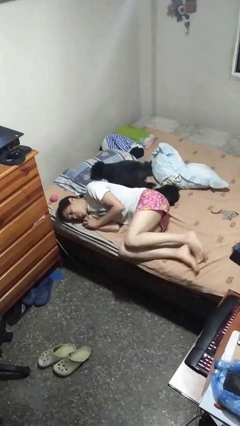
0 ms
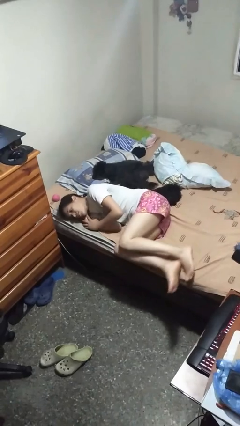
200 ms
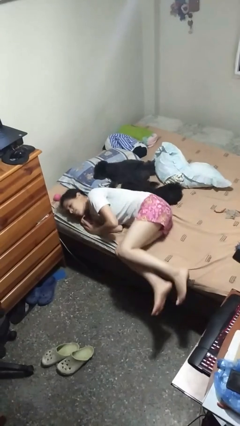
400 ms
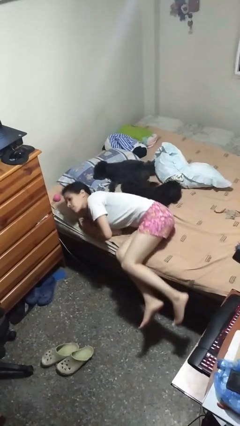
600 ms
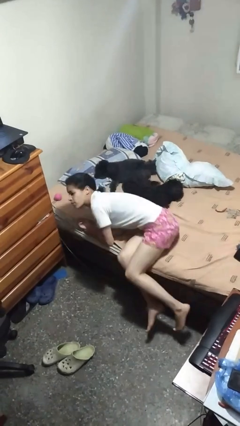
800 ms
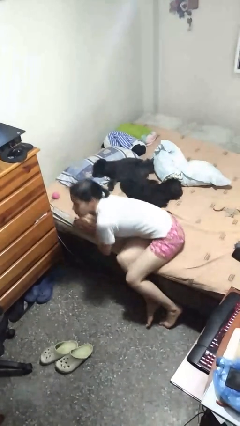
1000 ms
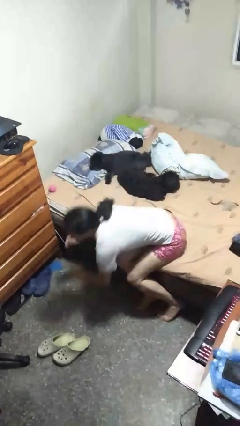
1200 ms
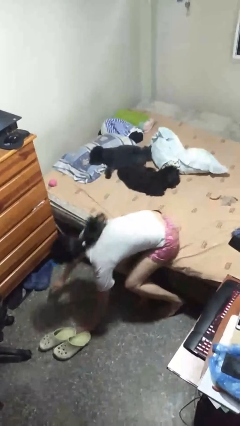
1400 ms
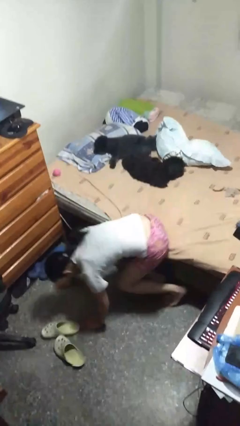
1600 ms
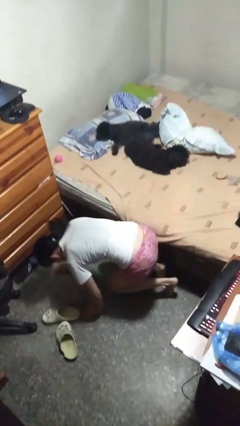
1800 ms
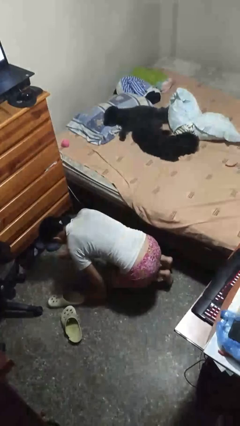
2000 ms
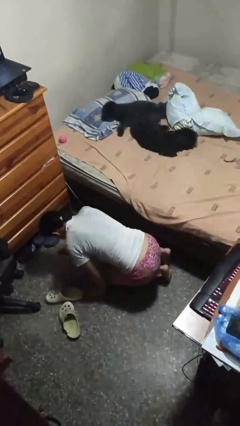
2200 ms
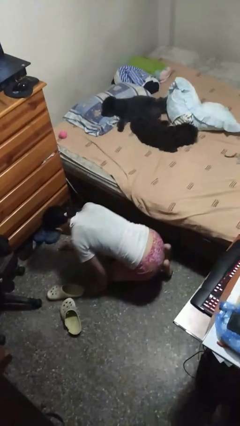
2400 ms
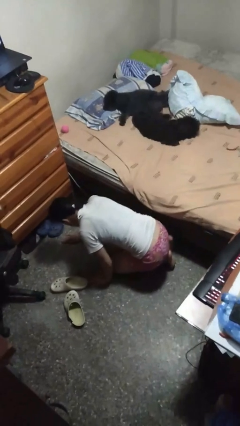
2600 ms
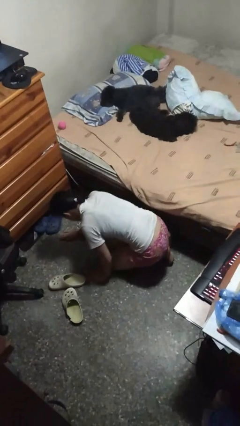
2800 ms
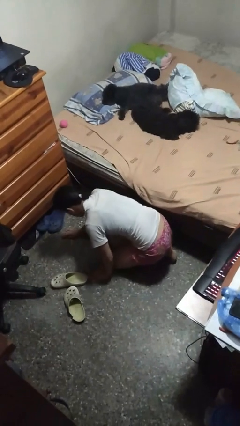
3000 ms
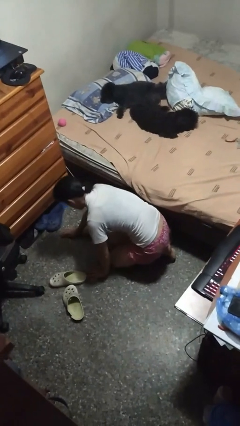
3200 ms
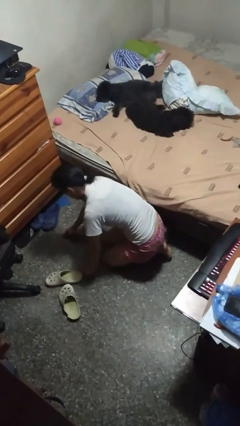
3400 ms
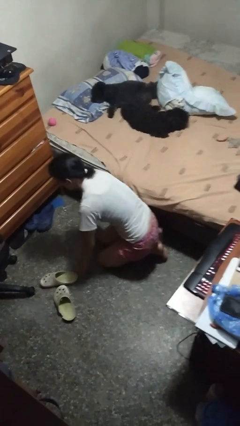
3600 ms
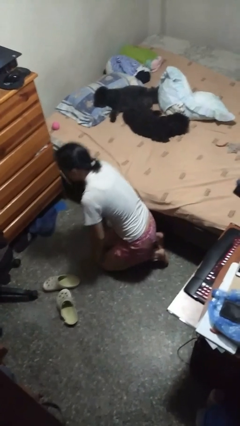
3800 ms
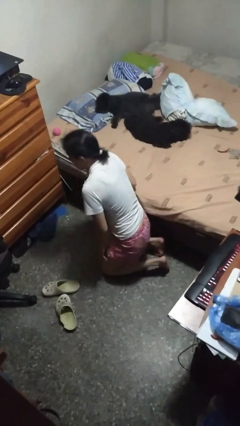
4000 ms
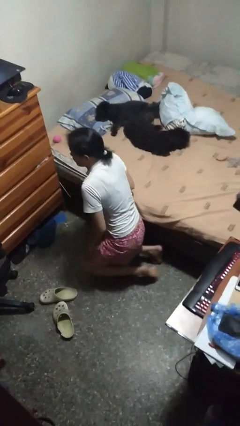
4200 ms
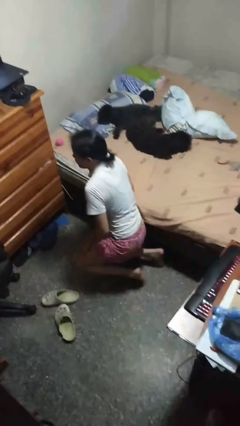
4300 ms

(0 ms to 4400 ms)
person falls from bed

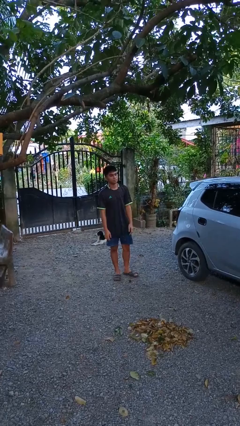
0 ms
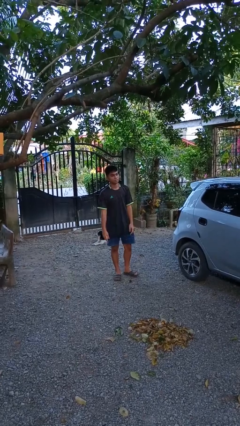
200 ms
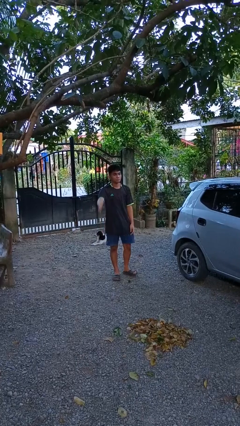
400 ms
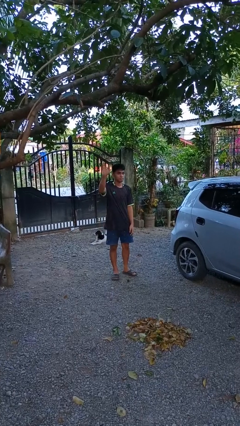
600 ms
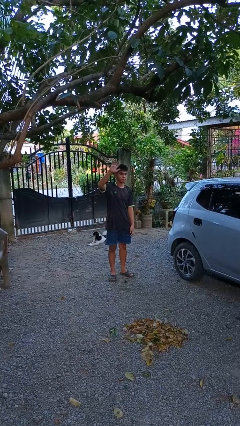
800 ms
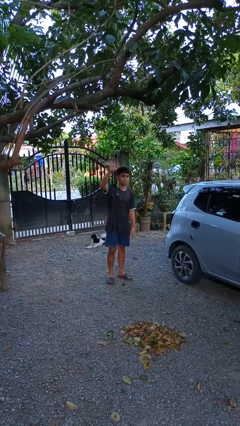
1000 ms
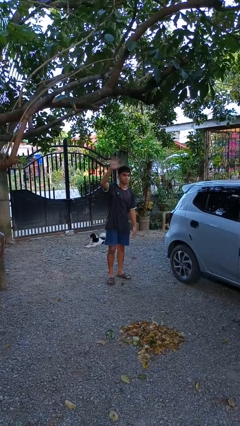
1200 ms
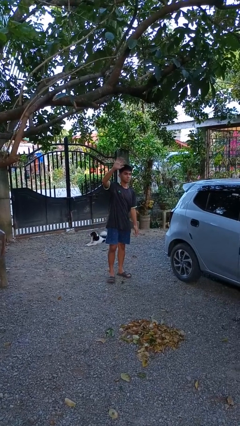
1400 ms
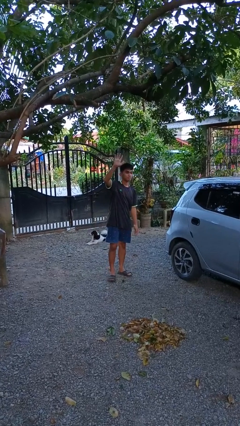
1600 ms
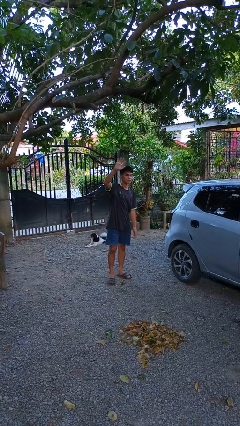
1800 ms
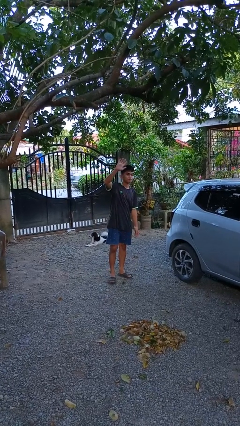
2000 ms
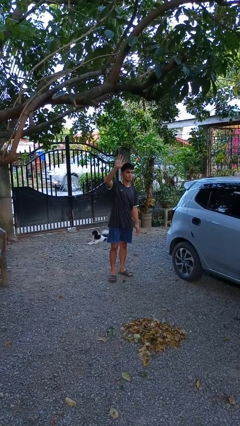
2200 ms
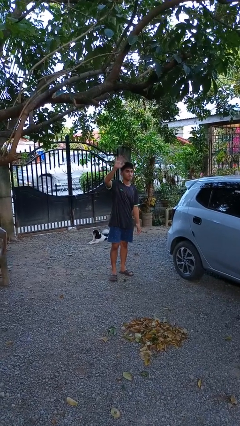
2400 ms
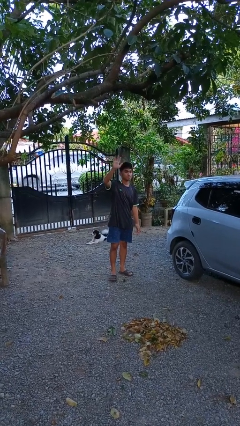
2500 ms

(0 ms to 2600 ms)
person waves at person

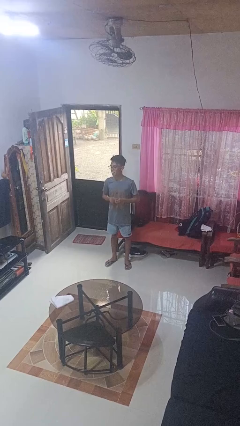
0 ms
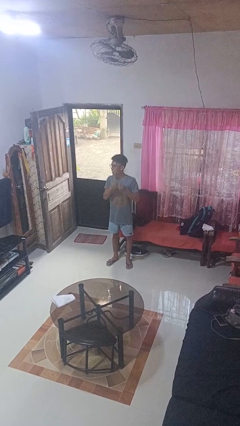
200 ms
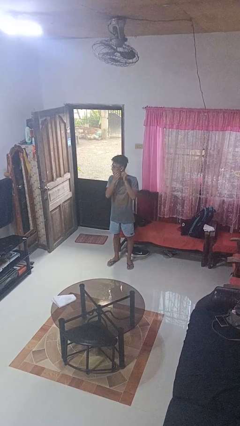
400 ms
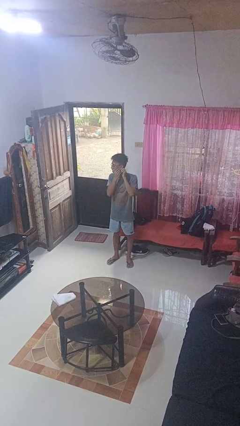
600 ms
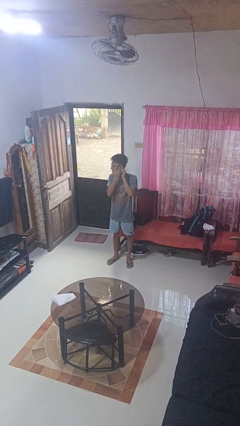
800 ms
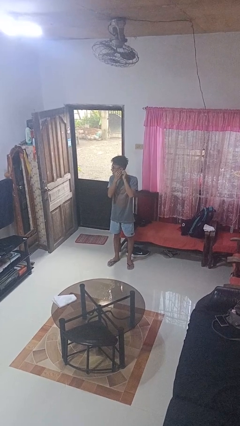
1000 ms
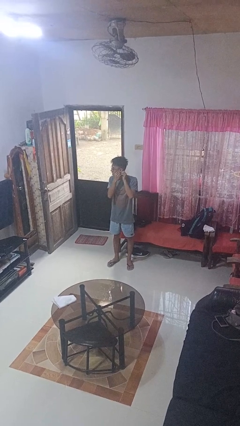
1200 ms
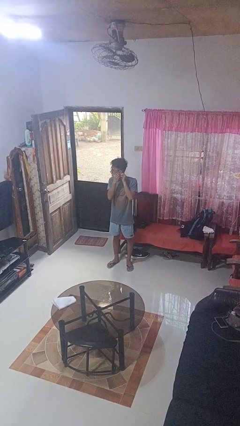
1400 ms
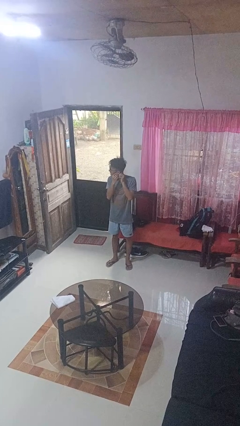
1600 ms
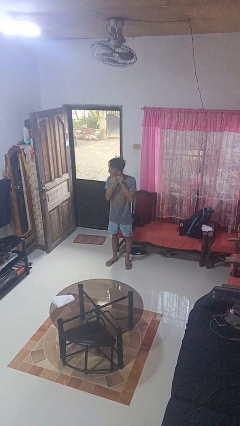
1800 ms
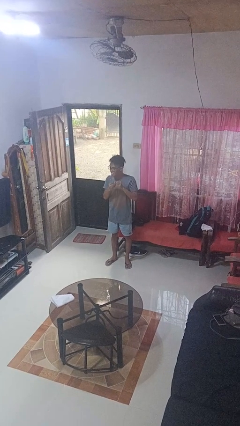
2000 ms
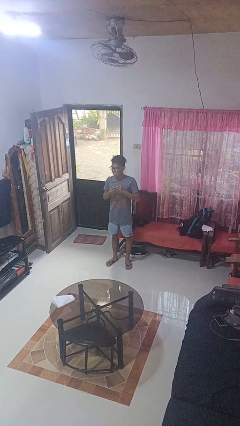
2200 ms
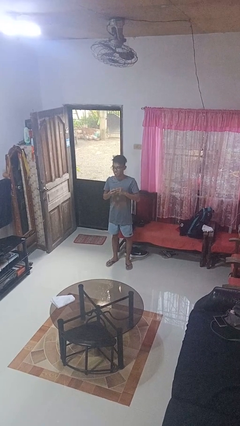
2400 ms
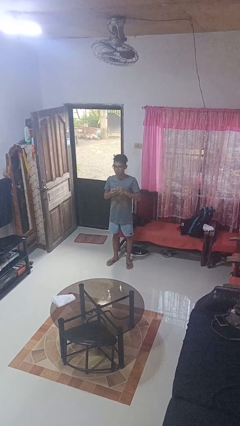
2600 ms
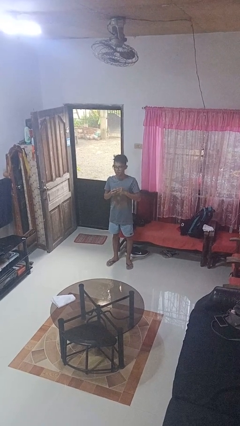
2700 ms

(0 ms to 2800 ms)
person takes off earrings

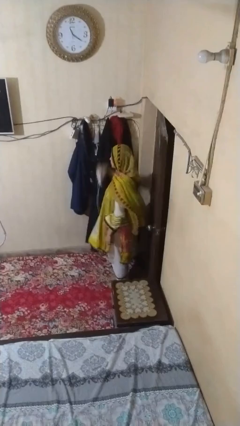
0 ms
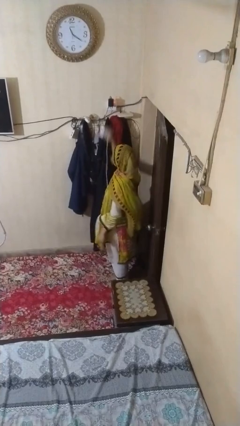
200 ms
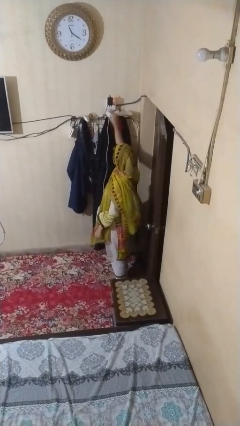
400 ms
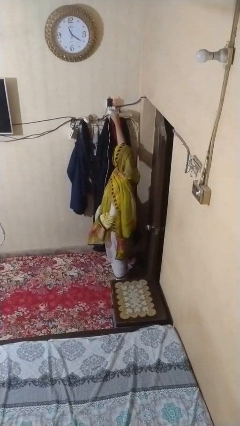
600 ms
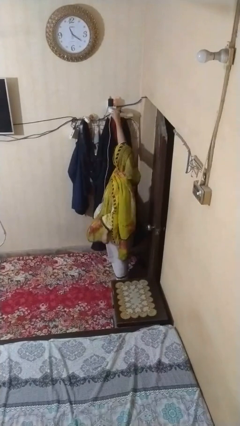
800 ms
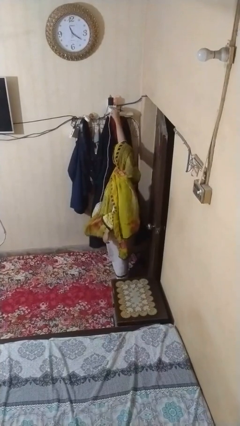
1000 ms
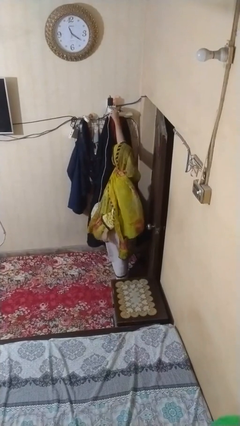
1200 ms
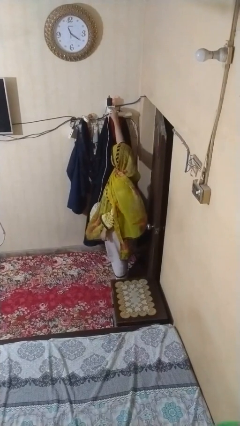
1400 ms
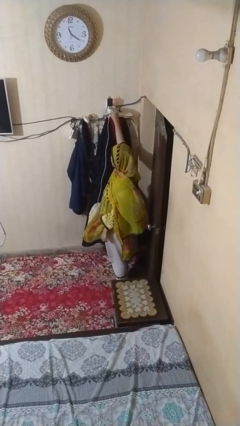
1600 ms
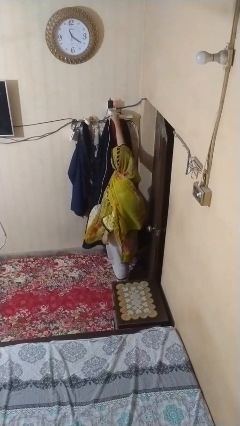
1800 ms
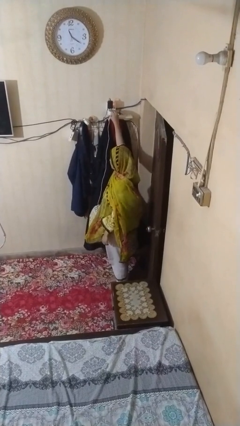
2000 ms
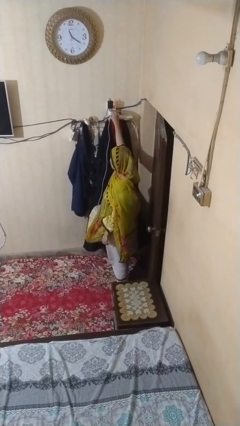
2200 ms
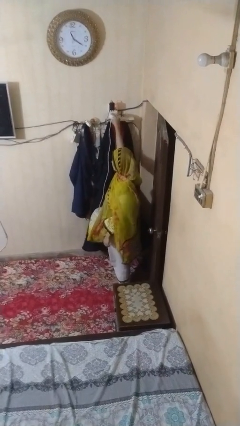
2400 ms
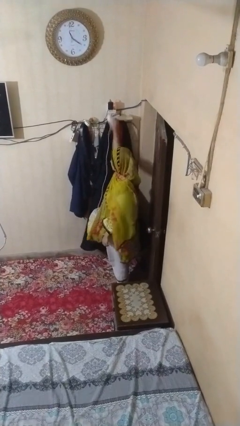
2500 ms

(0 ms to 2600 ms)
person plugs into electrical socket

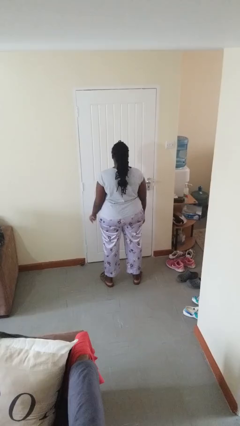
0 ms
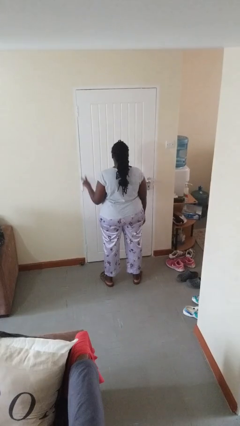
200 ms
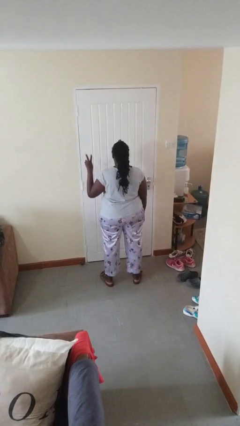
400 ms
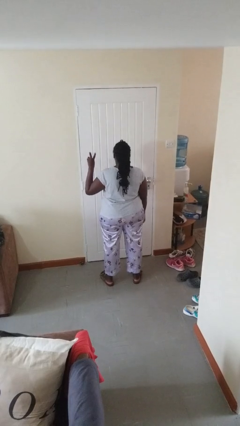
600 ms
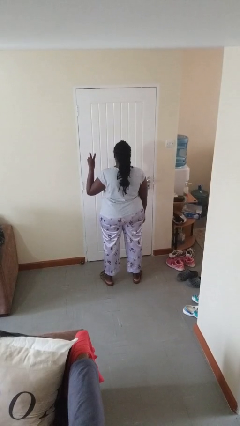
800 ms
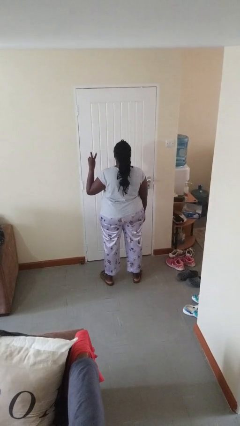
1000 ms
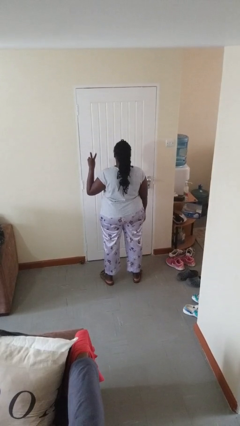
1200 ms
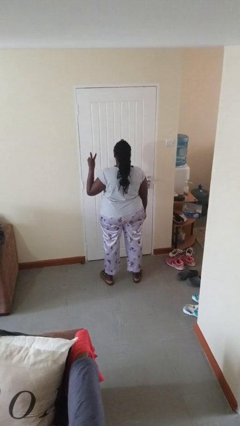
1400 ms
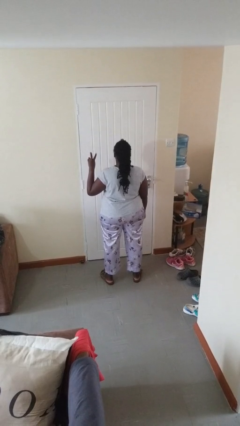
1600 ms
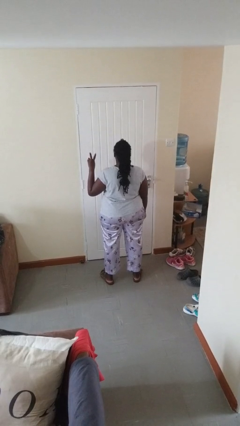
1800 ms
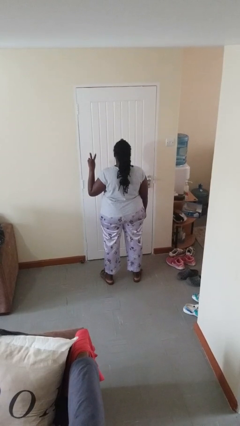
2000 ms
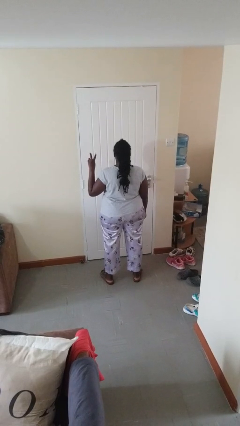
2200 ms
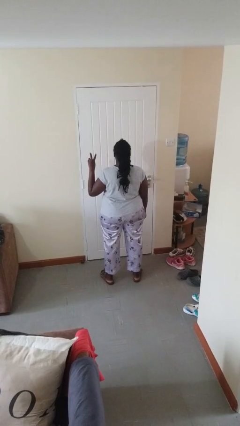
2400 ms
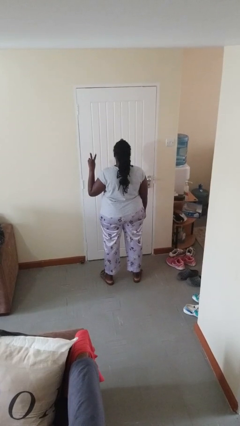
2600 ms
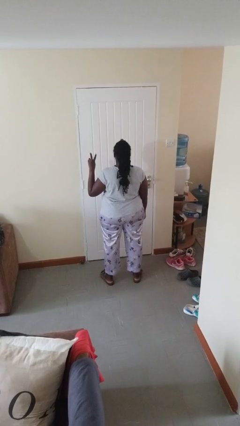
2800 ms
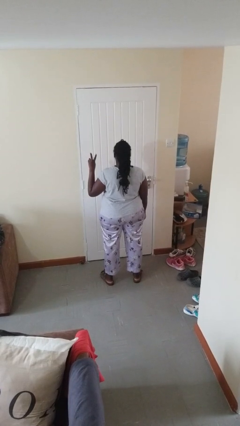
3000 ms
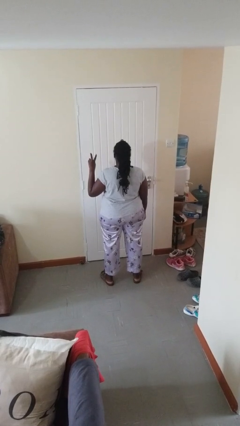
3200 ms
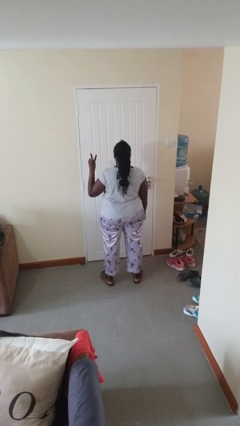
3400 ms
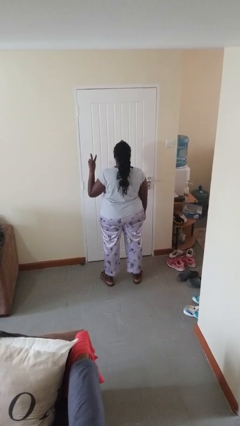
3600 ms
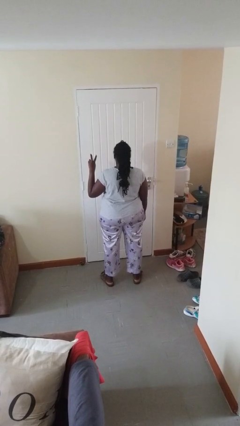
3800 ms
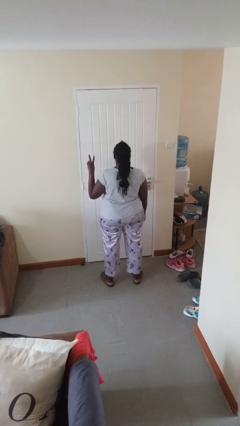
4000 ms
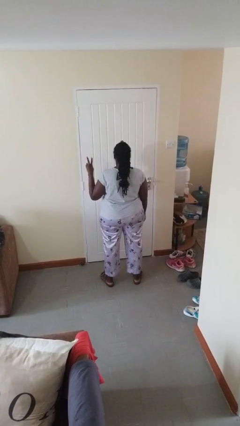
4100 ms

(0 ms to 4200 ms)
person gestures peace

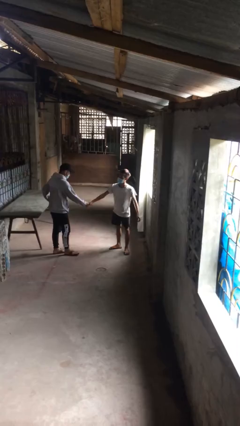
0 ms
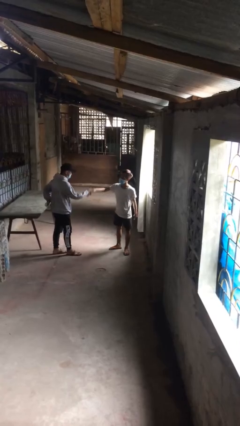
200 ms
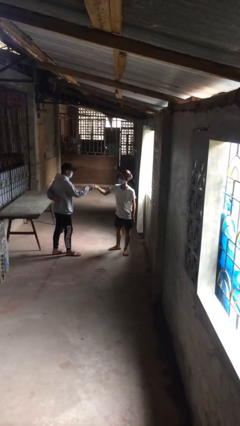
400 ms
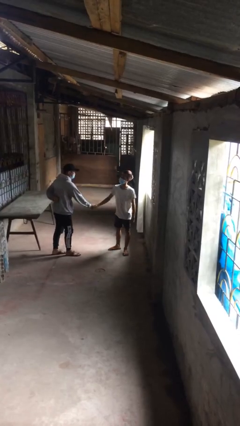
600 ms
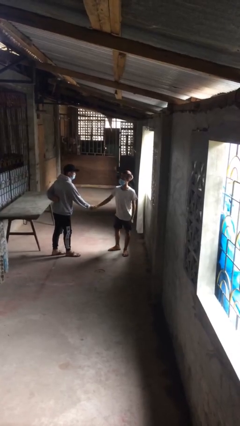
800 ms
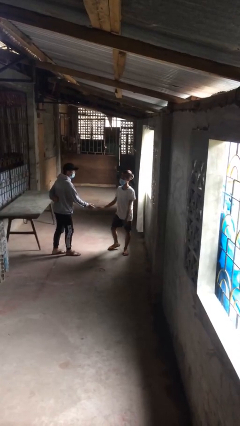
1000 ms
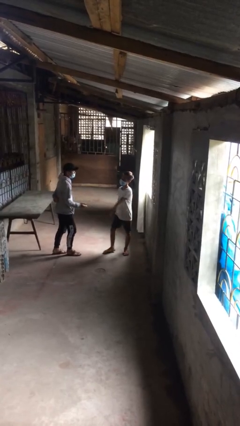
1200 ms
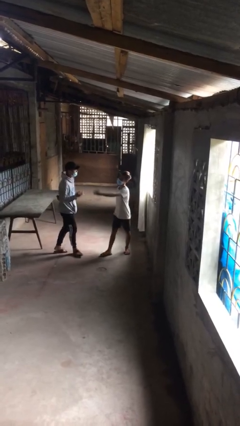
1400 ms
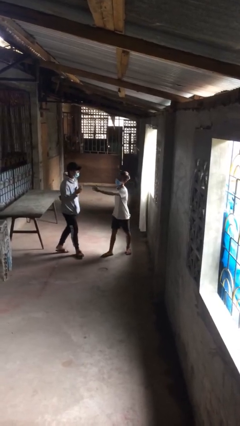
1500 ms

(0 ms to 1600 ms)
person shakes hand
